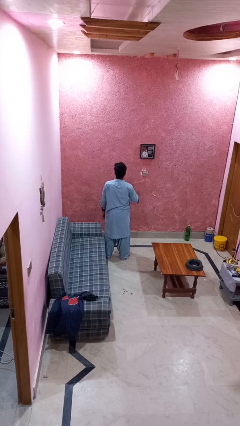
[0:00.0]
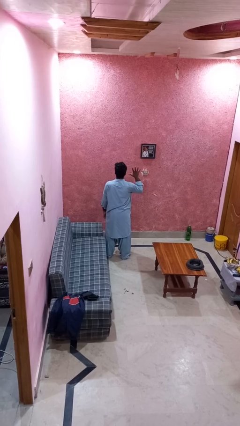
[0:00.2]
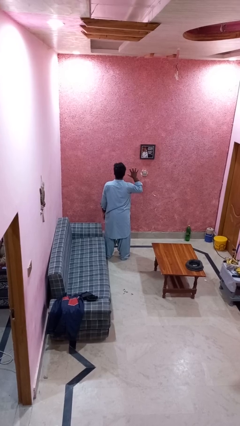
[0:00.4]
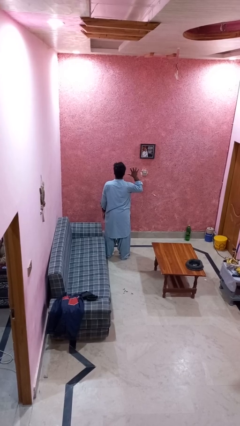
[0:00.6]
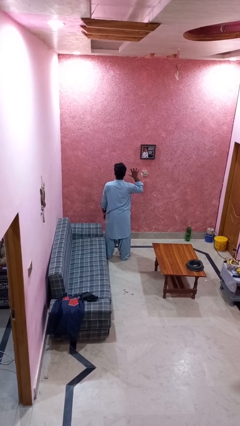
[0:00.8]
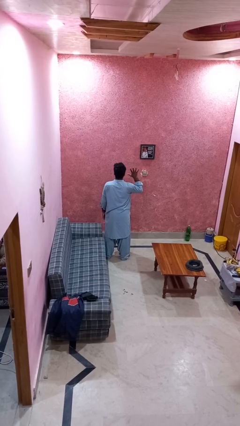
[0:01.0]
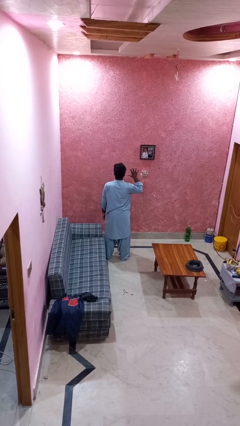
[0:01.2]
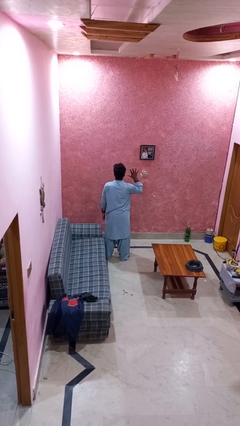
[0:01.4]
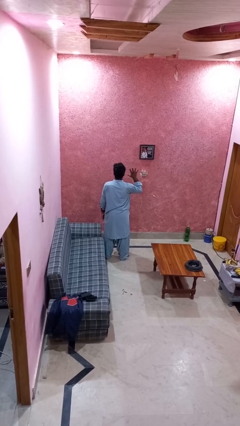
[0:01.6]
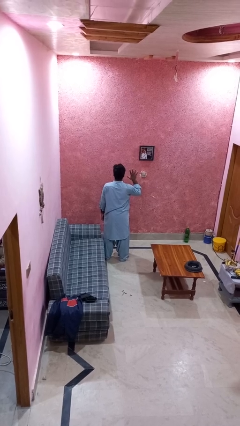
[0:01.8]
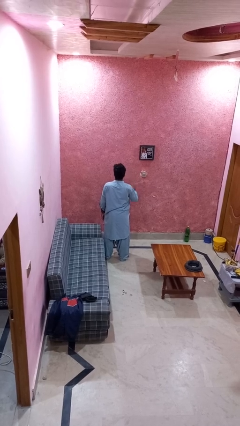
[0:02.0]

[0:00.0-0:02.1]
person gestures number five

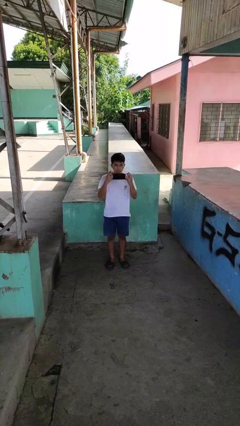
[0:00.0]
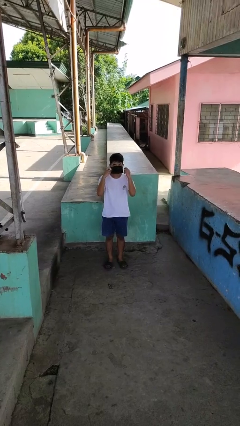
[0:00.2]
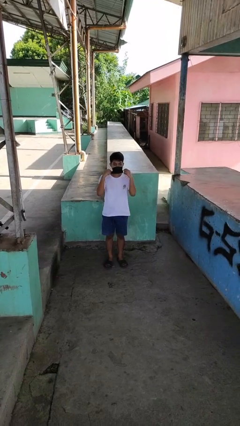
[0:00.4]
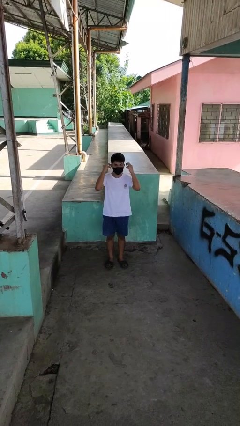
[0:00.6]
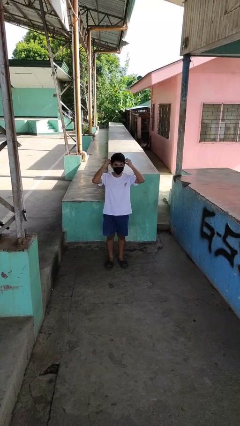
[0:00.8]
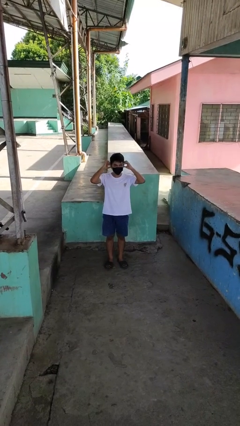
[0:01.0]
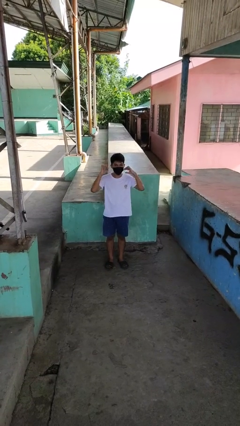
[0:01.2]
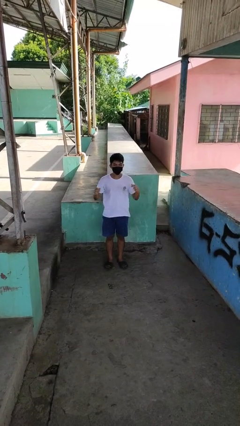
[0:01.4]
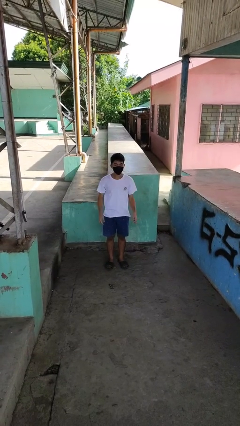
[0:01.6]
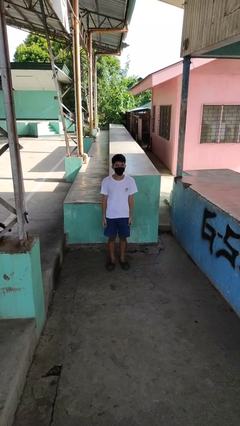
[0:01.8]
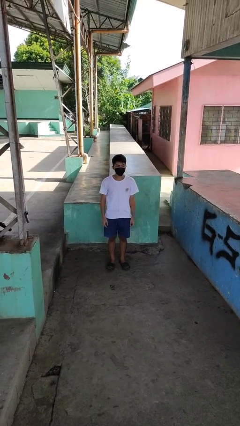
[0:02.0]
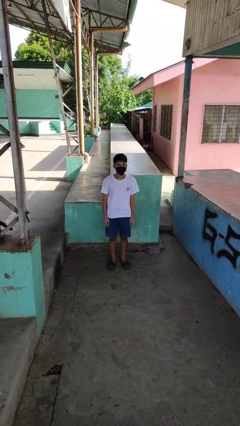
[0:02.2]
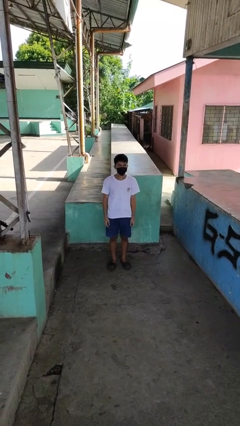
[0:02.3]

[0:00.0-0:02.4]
person puts on facemask

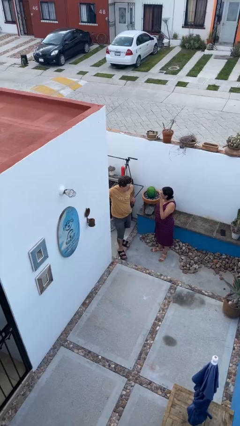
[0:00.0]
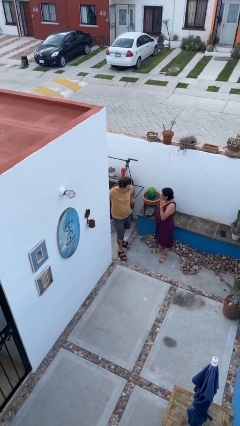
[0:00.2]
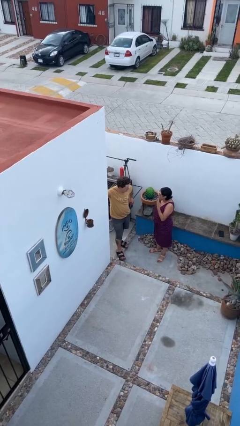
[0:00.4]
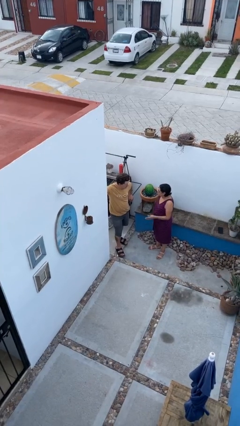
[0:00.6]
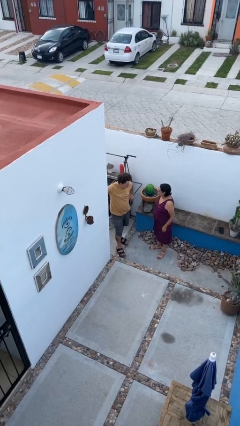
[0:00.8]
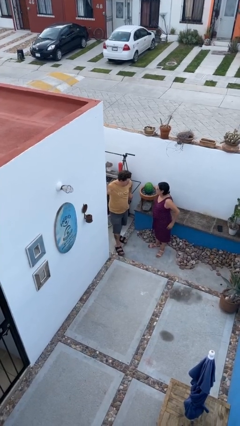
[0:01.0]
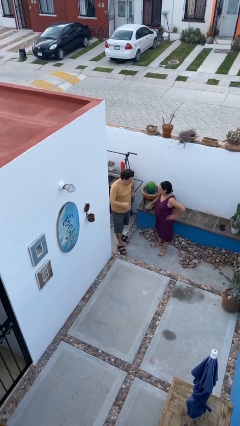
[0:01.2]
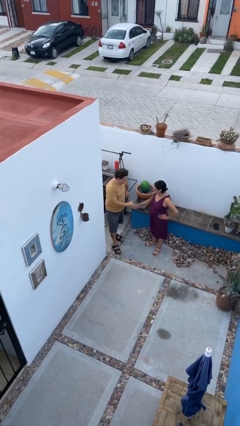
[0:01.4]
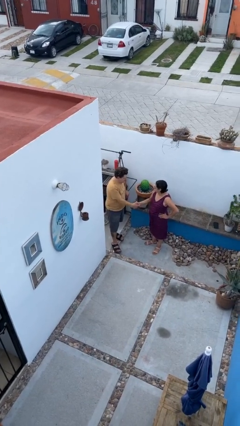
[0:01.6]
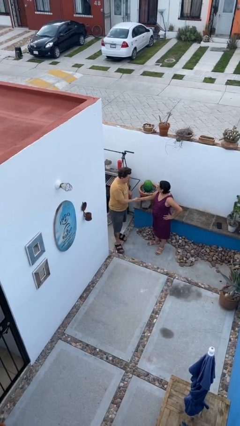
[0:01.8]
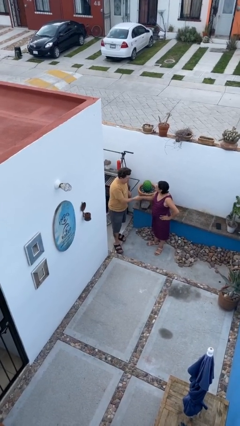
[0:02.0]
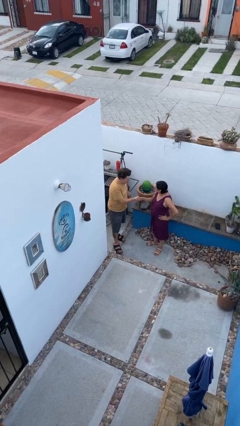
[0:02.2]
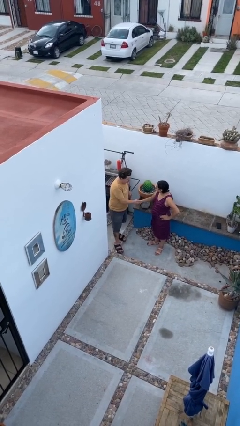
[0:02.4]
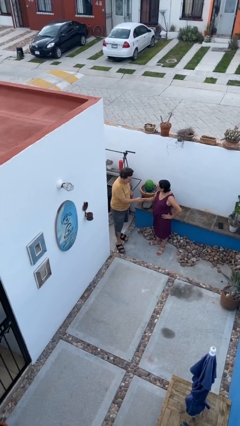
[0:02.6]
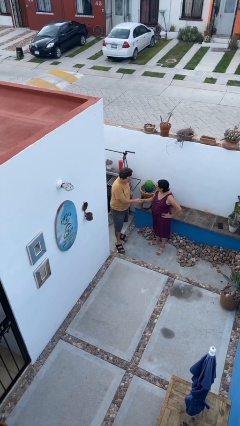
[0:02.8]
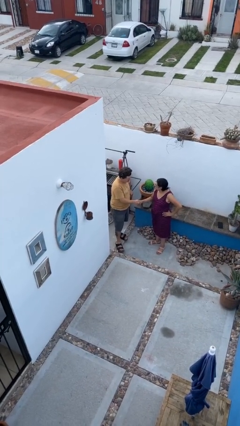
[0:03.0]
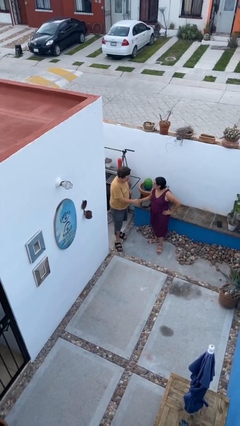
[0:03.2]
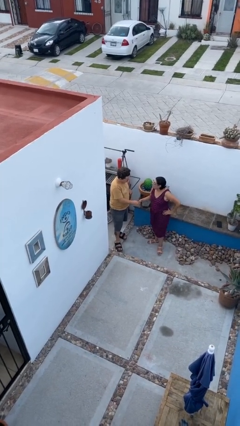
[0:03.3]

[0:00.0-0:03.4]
person shakes hand

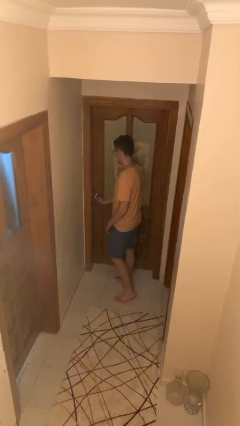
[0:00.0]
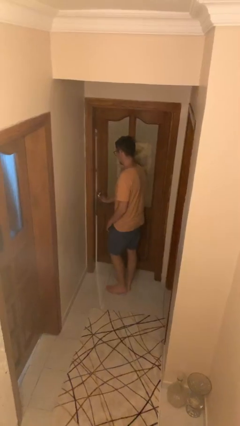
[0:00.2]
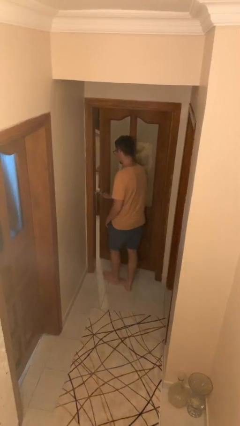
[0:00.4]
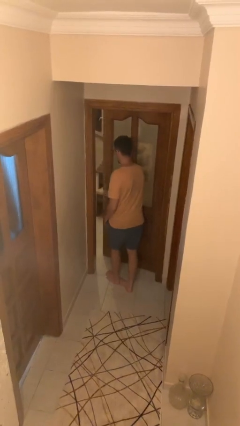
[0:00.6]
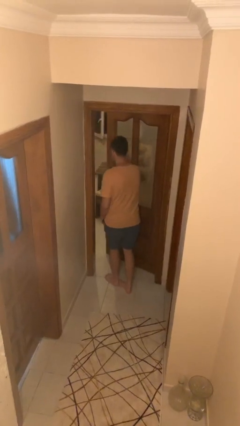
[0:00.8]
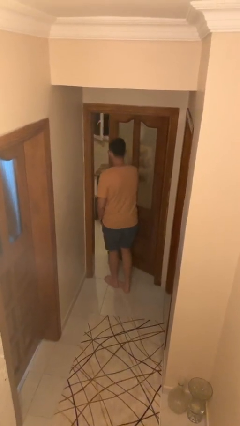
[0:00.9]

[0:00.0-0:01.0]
person opens facility door

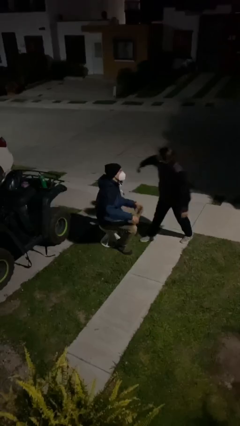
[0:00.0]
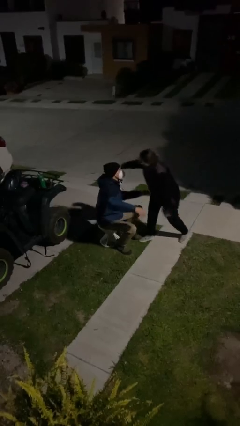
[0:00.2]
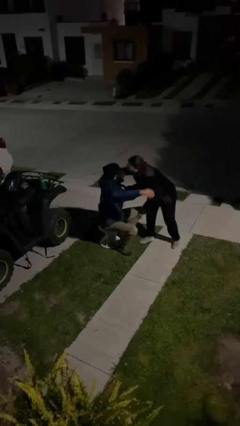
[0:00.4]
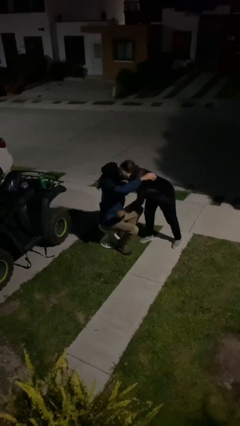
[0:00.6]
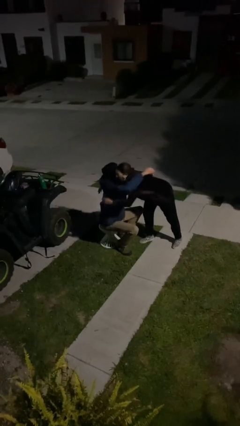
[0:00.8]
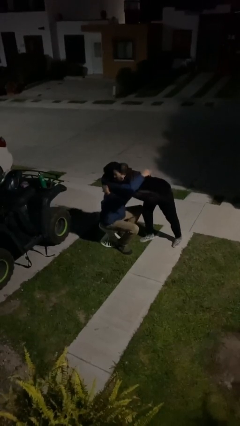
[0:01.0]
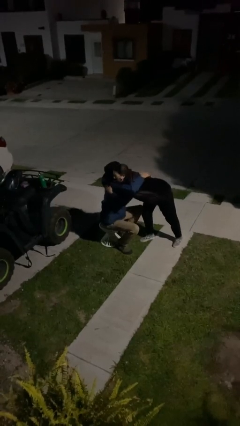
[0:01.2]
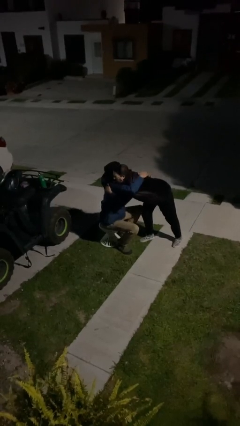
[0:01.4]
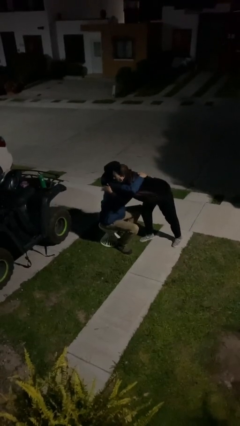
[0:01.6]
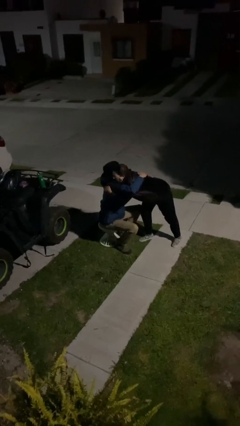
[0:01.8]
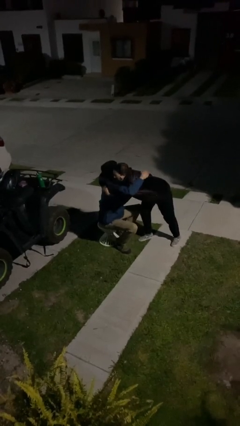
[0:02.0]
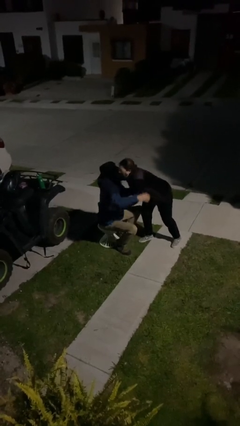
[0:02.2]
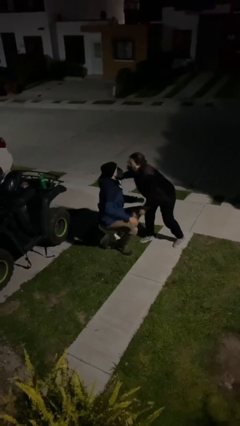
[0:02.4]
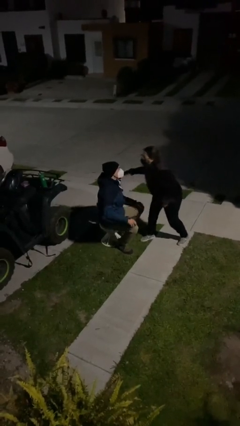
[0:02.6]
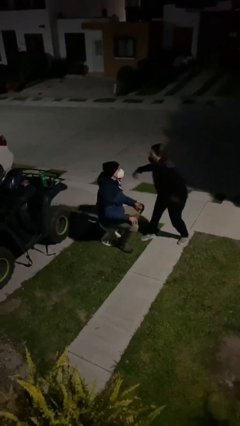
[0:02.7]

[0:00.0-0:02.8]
person embraces person

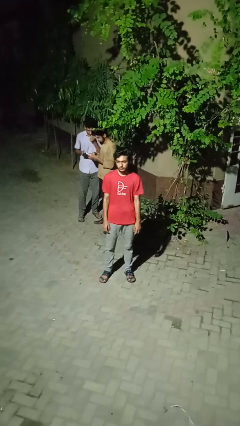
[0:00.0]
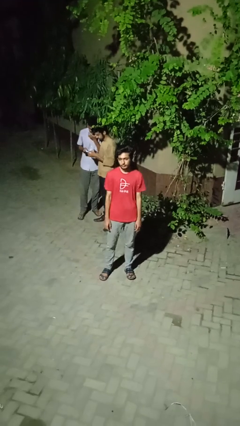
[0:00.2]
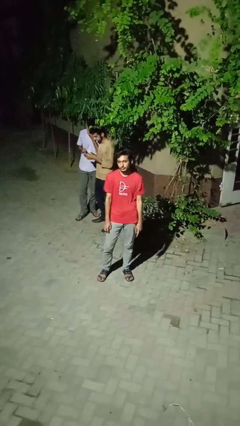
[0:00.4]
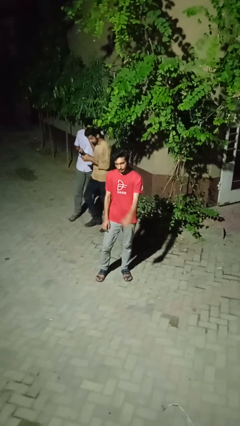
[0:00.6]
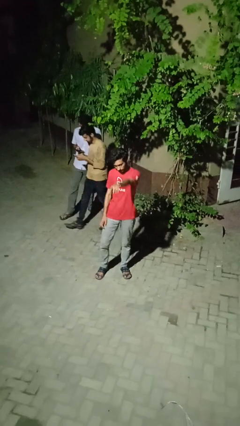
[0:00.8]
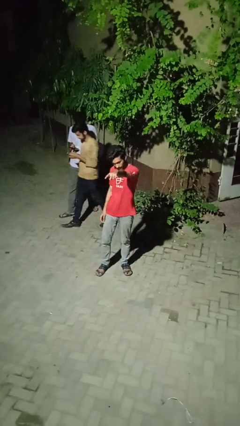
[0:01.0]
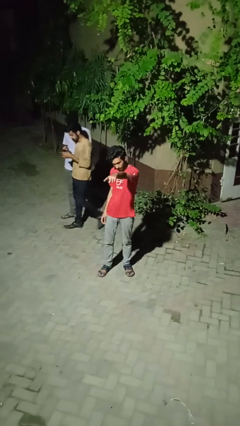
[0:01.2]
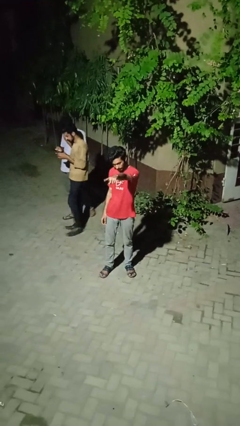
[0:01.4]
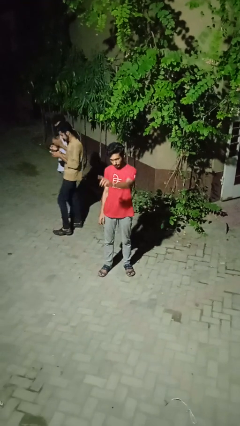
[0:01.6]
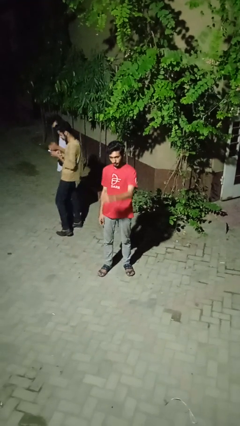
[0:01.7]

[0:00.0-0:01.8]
person points at person

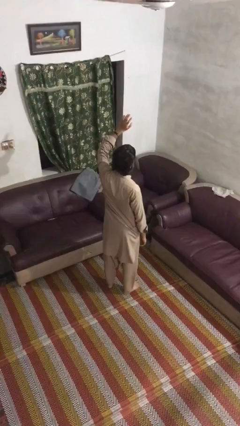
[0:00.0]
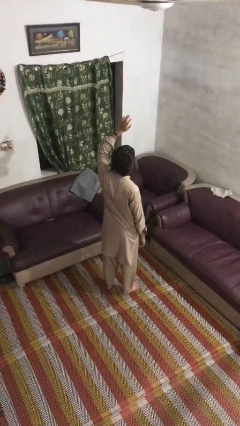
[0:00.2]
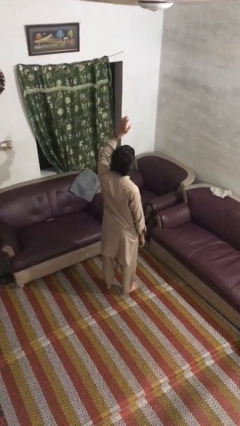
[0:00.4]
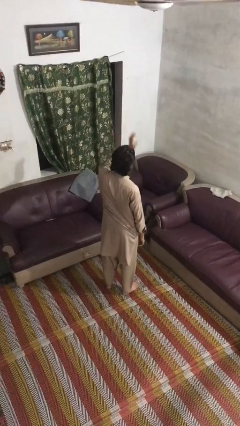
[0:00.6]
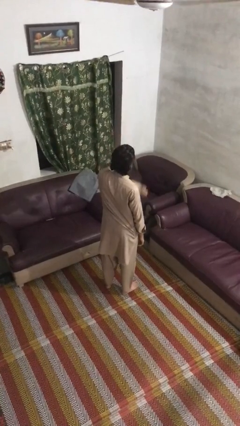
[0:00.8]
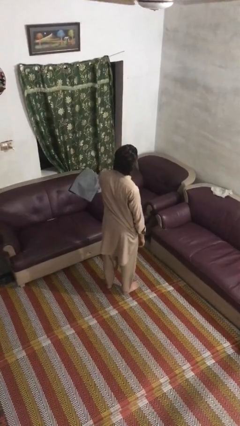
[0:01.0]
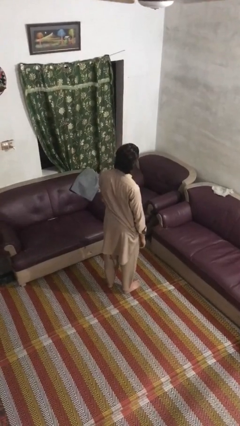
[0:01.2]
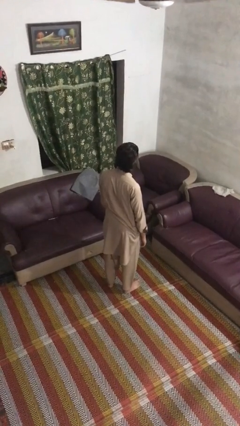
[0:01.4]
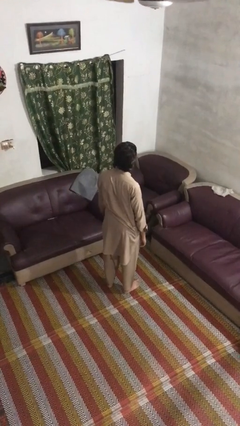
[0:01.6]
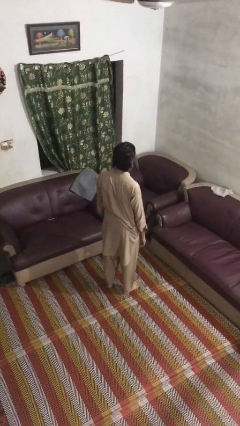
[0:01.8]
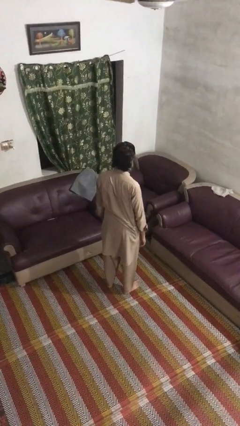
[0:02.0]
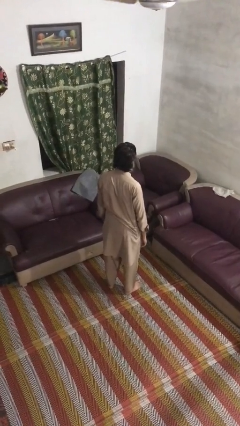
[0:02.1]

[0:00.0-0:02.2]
person gestures swipe down

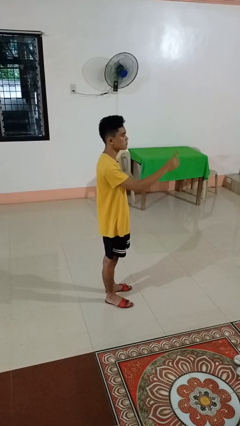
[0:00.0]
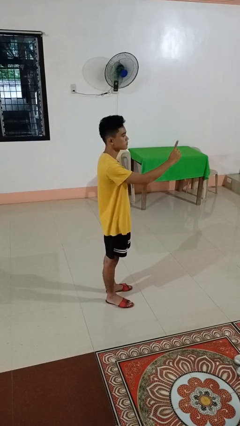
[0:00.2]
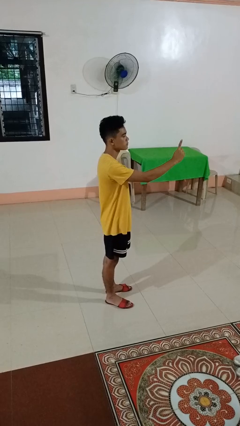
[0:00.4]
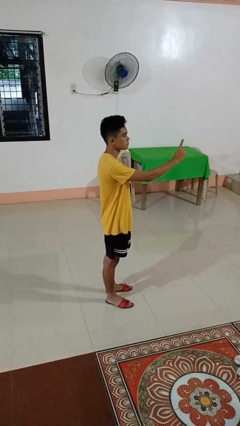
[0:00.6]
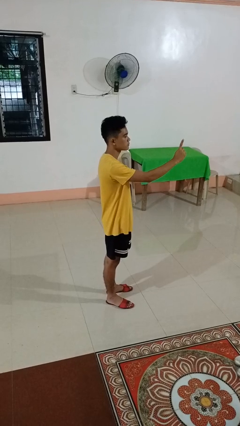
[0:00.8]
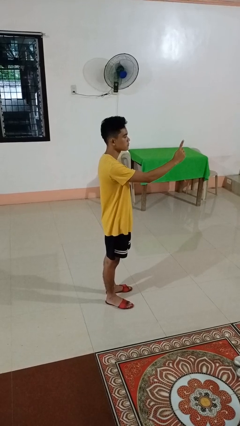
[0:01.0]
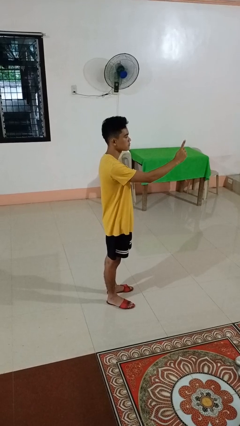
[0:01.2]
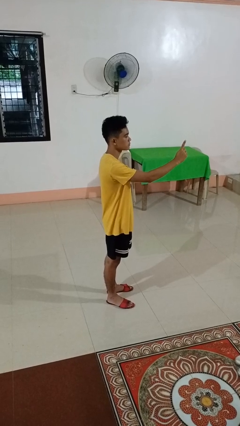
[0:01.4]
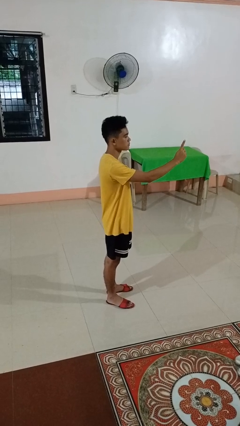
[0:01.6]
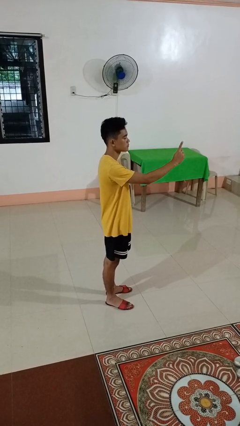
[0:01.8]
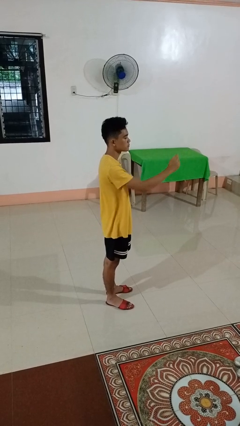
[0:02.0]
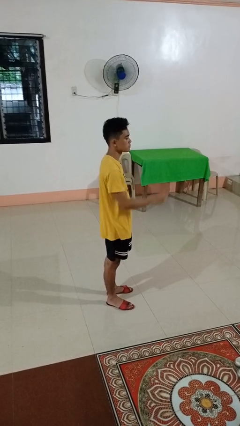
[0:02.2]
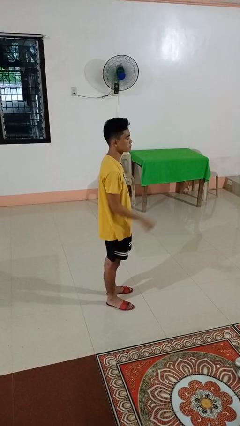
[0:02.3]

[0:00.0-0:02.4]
person gestures number one
